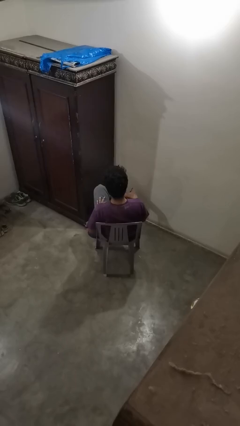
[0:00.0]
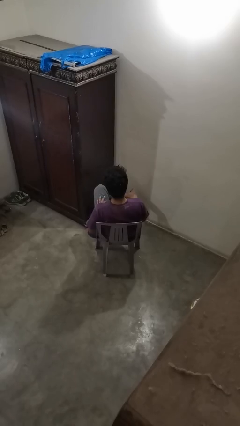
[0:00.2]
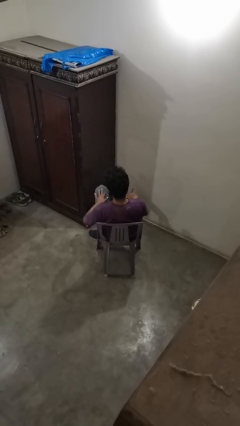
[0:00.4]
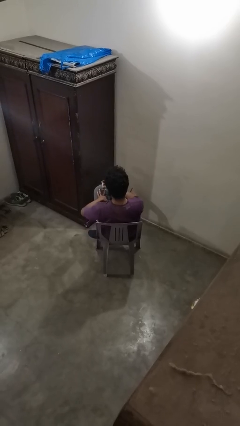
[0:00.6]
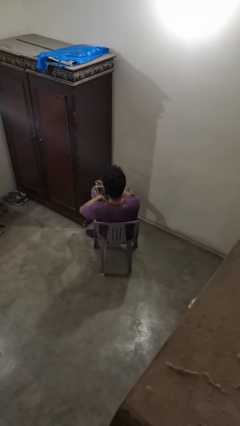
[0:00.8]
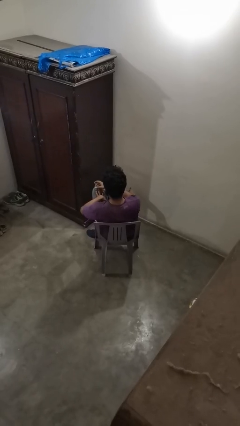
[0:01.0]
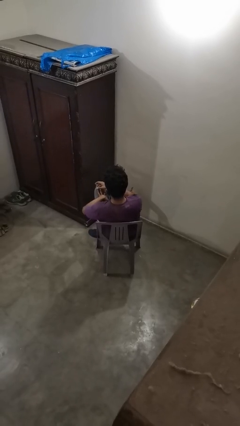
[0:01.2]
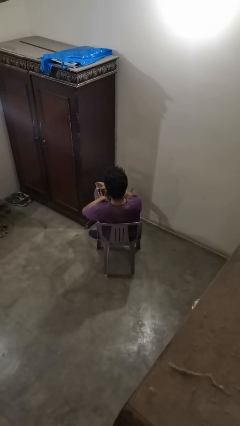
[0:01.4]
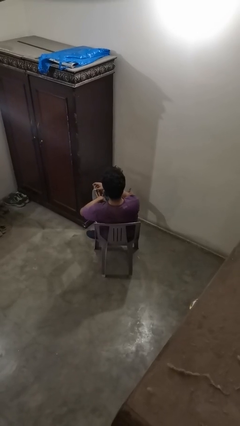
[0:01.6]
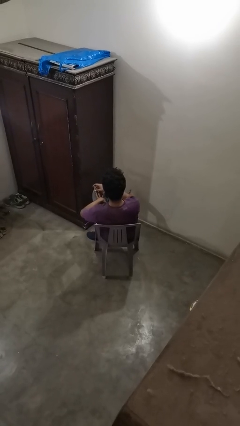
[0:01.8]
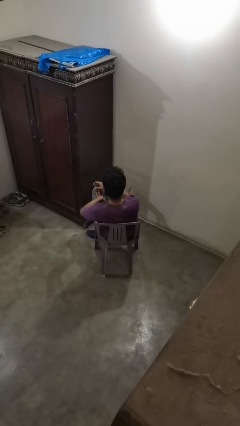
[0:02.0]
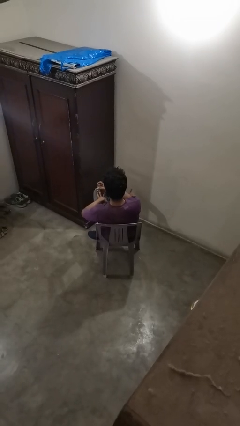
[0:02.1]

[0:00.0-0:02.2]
person clips fingernails

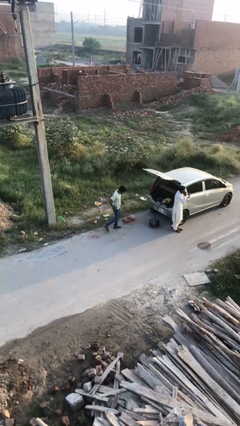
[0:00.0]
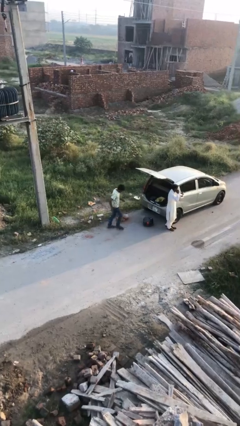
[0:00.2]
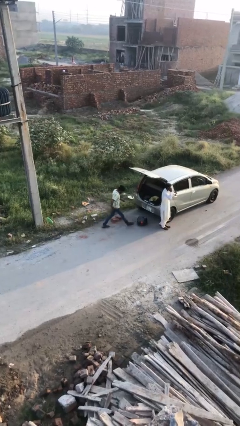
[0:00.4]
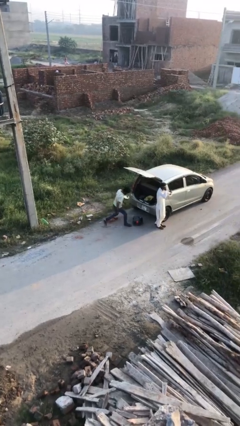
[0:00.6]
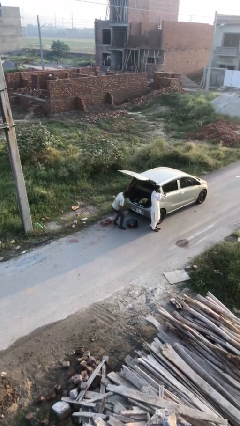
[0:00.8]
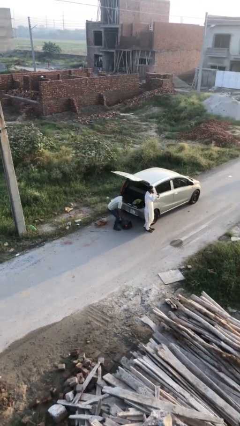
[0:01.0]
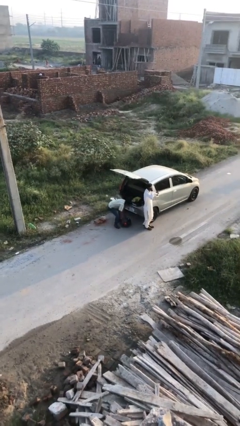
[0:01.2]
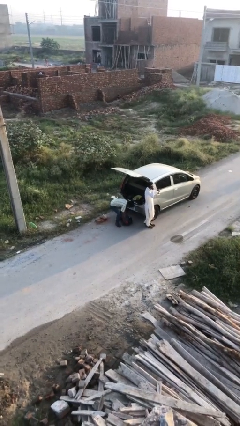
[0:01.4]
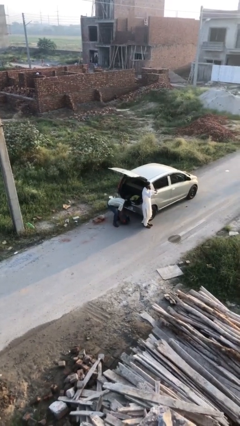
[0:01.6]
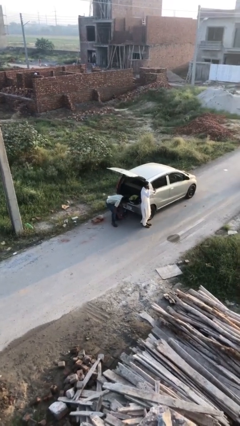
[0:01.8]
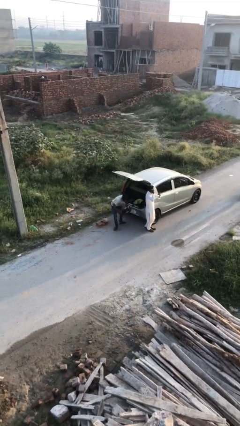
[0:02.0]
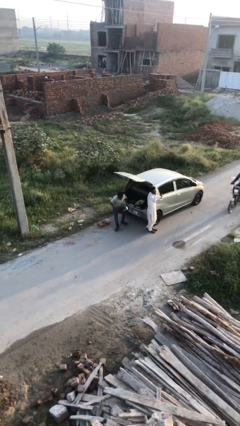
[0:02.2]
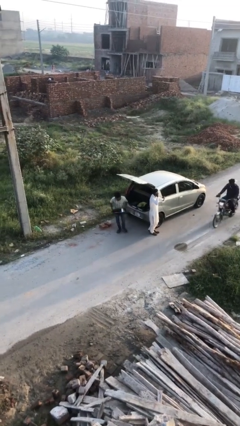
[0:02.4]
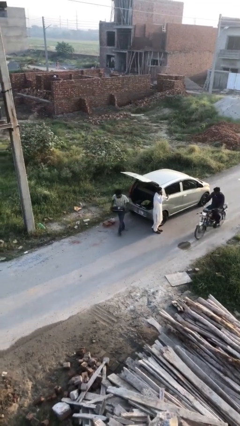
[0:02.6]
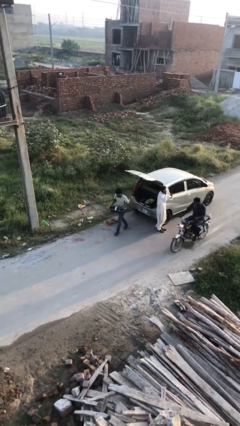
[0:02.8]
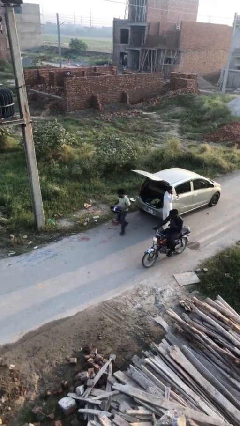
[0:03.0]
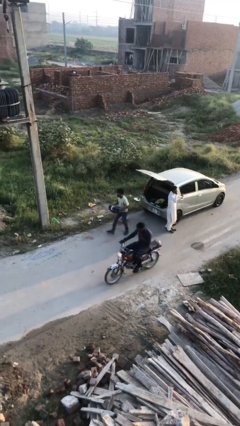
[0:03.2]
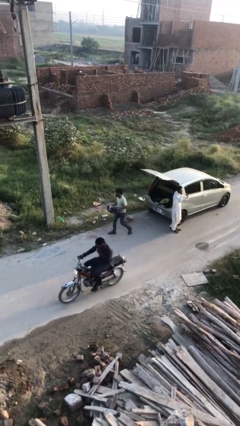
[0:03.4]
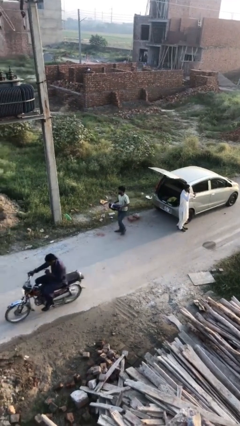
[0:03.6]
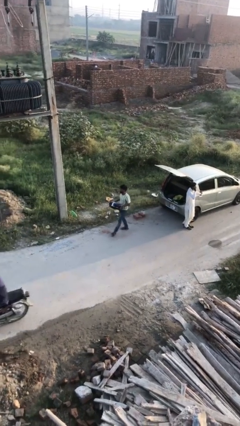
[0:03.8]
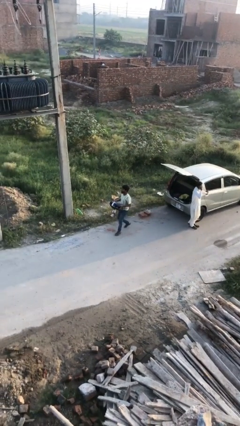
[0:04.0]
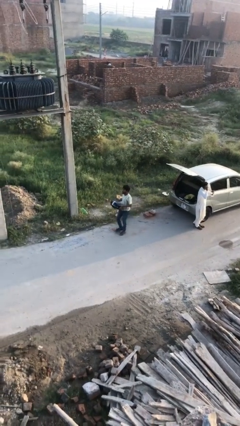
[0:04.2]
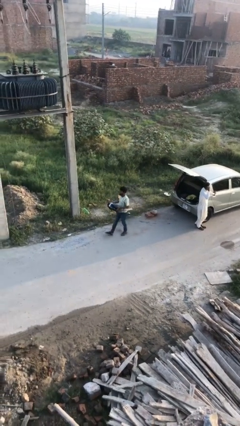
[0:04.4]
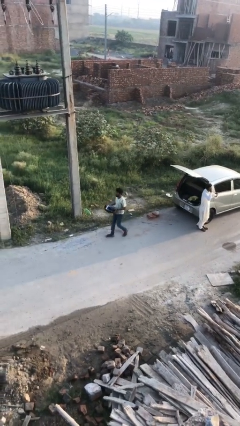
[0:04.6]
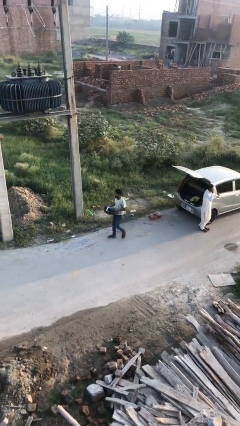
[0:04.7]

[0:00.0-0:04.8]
person steals object from person

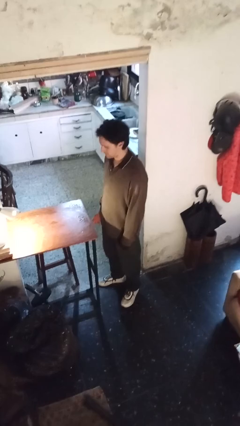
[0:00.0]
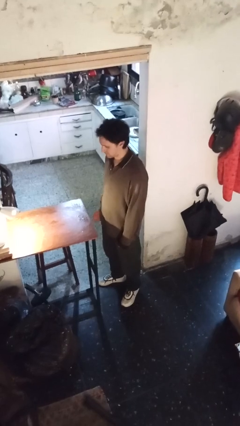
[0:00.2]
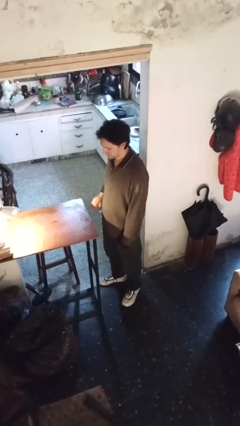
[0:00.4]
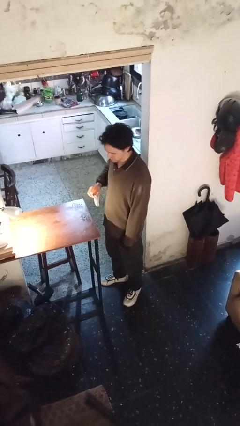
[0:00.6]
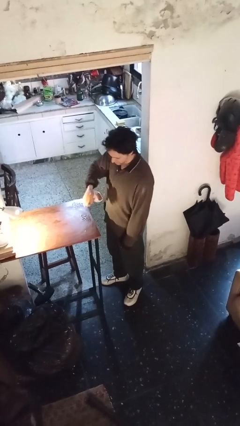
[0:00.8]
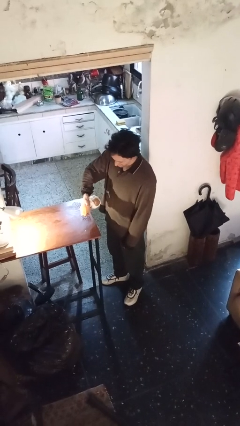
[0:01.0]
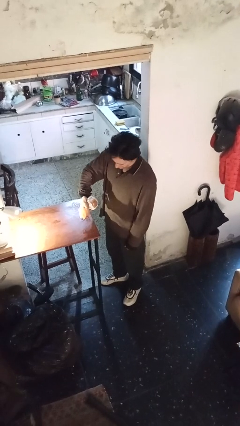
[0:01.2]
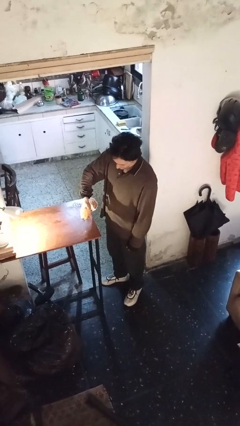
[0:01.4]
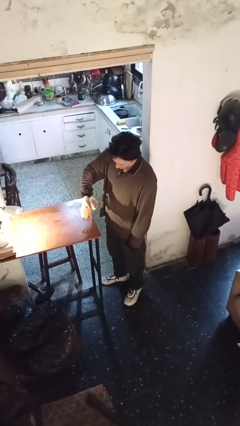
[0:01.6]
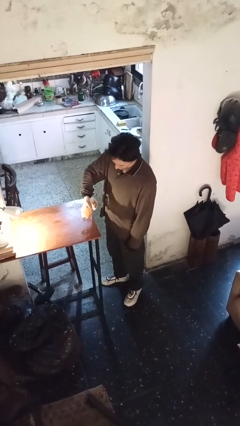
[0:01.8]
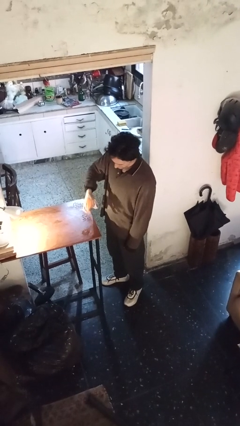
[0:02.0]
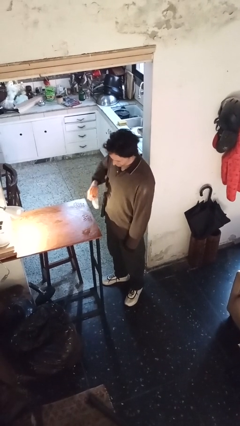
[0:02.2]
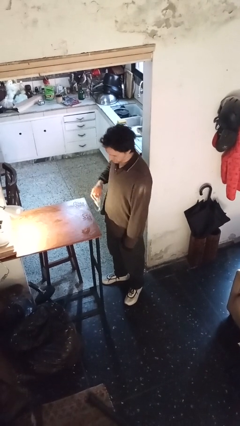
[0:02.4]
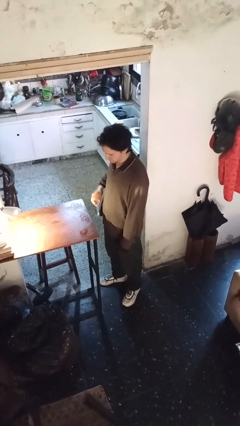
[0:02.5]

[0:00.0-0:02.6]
person sprays from bottle

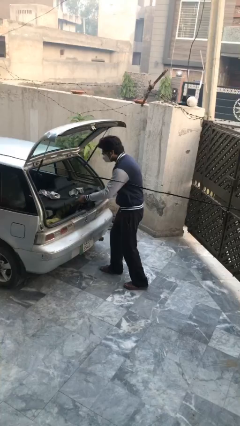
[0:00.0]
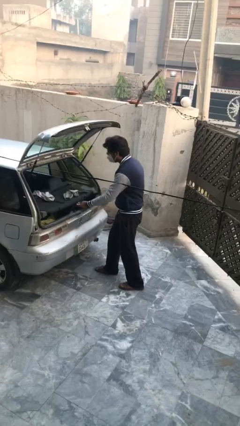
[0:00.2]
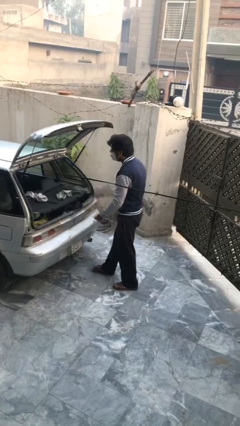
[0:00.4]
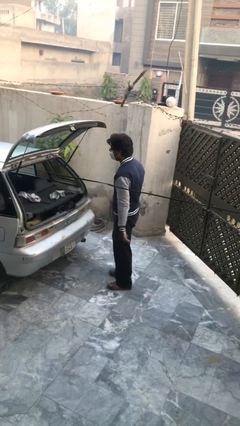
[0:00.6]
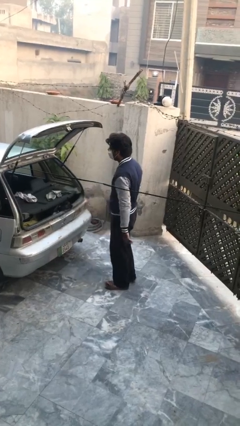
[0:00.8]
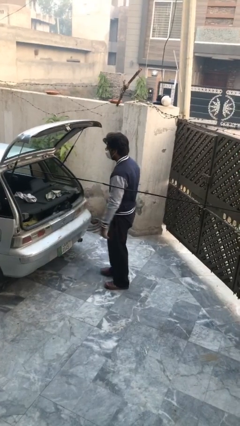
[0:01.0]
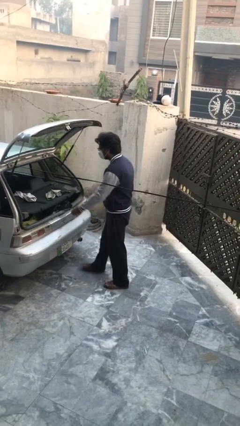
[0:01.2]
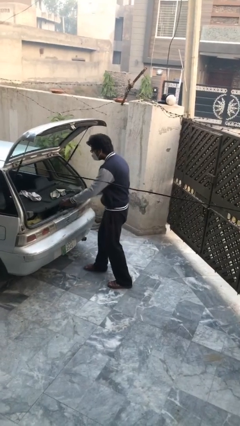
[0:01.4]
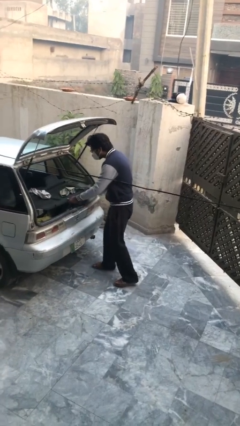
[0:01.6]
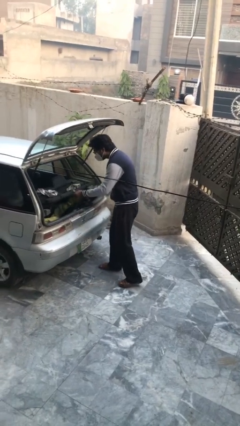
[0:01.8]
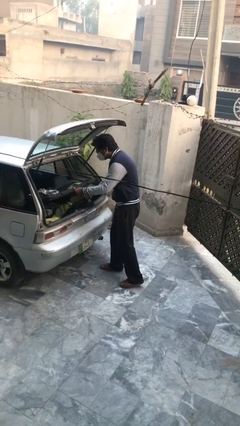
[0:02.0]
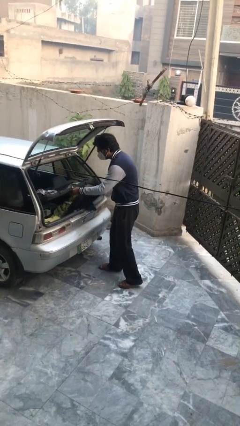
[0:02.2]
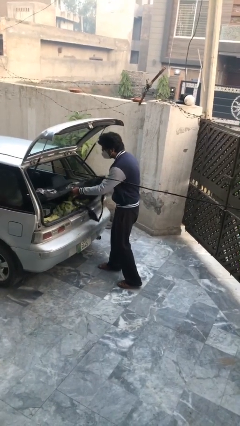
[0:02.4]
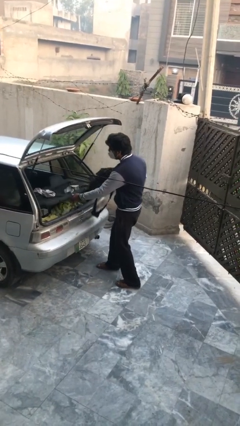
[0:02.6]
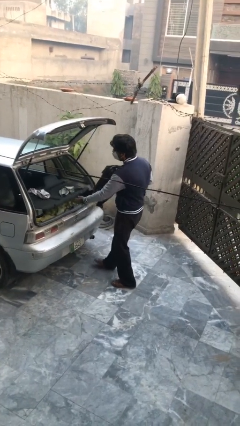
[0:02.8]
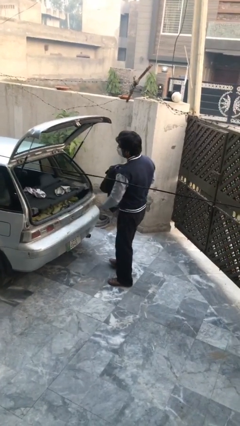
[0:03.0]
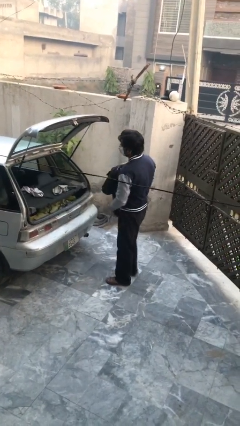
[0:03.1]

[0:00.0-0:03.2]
person unloads car

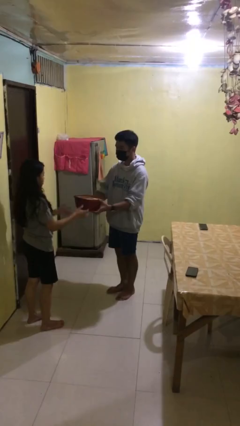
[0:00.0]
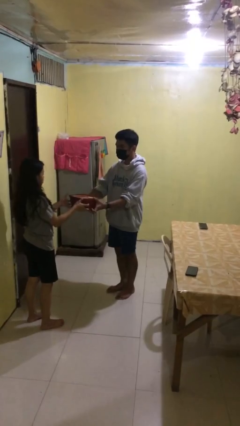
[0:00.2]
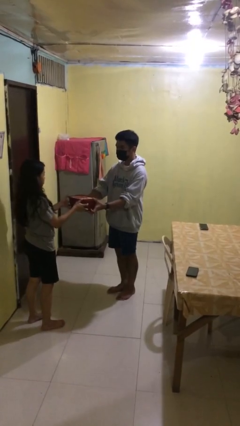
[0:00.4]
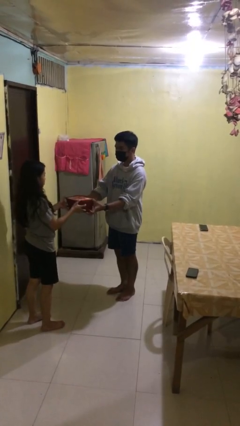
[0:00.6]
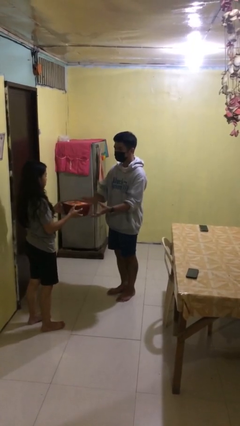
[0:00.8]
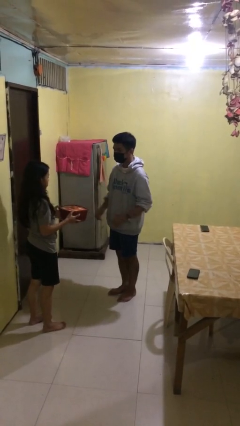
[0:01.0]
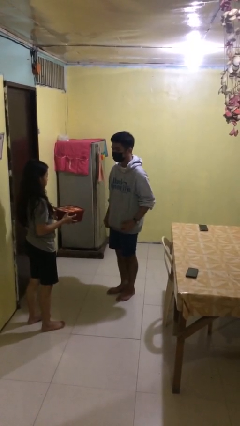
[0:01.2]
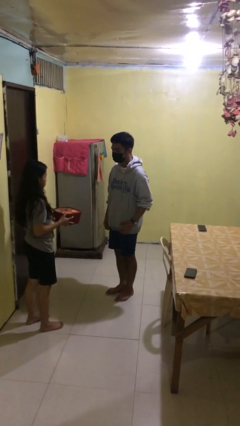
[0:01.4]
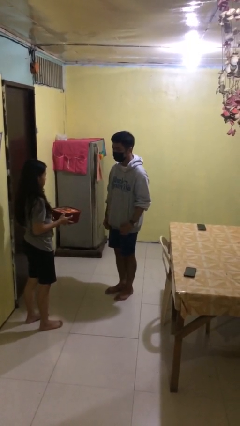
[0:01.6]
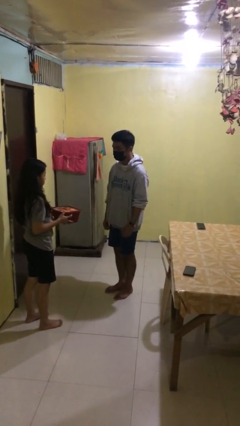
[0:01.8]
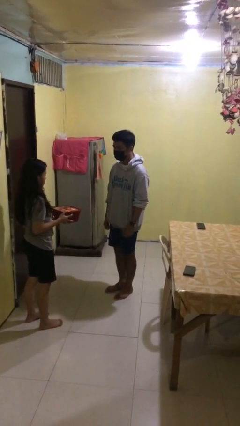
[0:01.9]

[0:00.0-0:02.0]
person transfers object to person

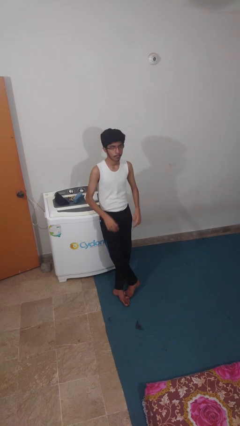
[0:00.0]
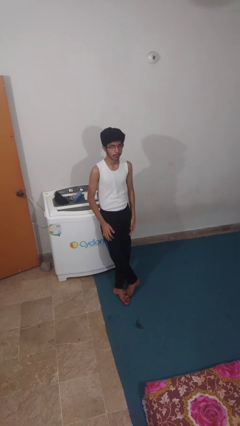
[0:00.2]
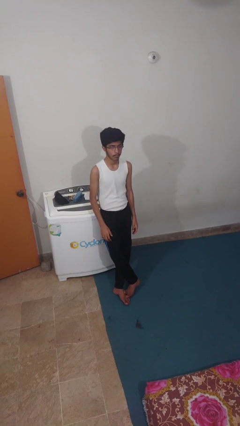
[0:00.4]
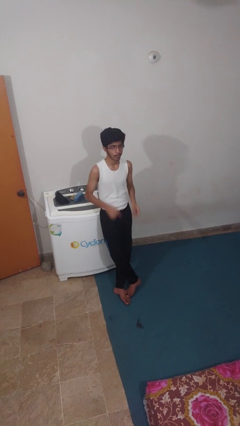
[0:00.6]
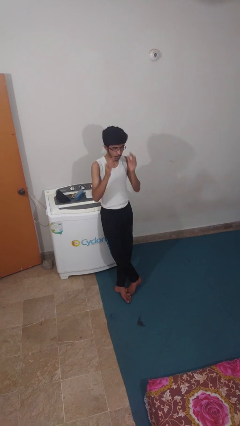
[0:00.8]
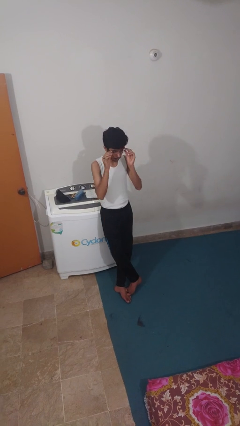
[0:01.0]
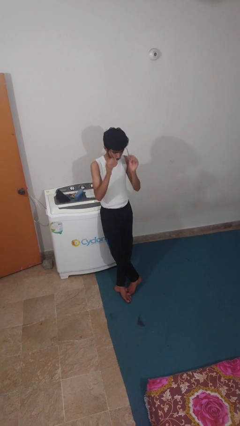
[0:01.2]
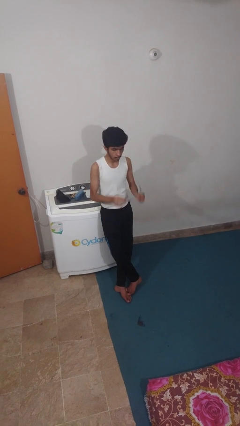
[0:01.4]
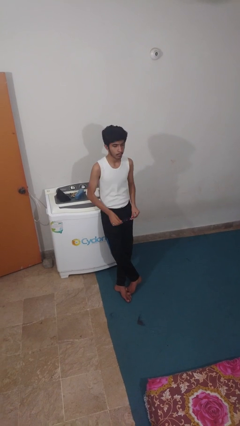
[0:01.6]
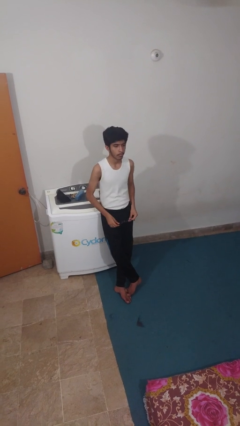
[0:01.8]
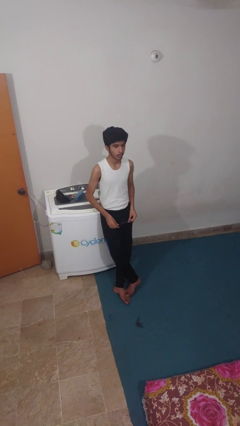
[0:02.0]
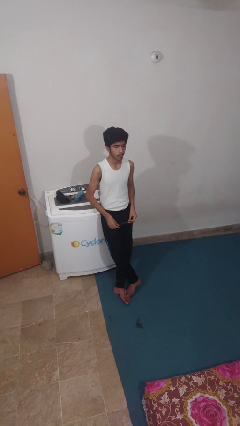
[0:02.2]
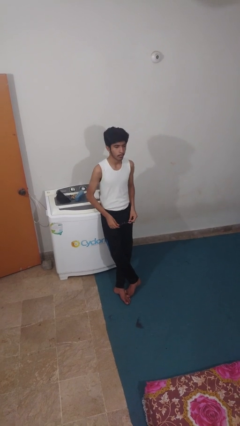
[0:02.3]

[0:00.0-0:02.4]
person takes off glasses

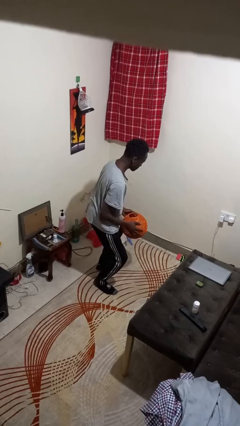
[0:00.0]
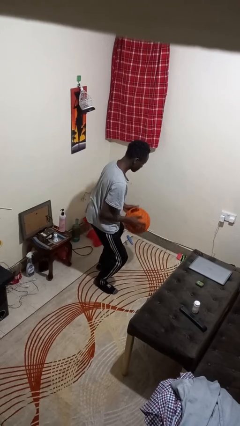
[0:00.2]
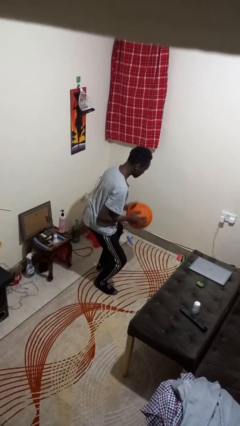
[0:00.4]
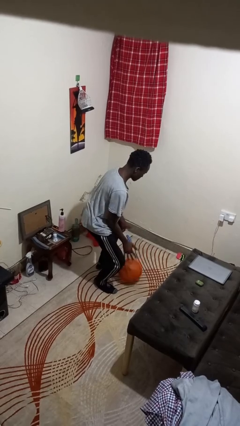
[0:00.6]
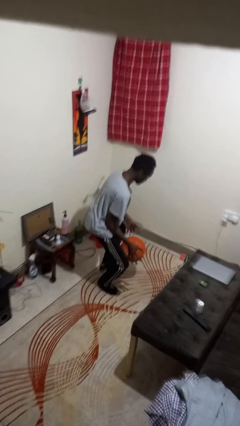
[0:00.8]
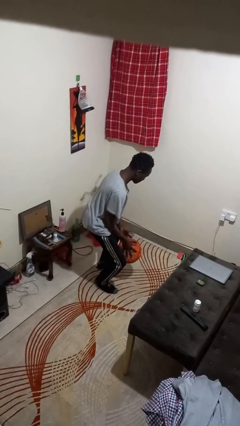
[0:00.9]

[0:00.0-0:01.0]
person bounces ball on floor
